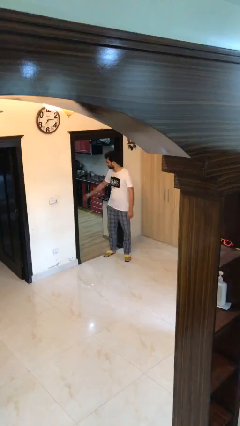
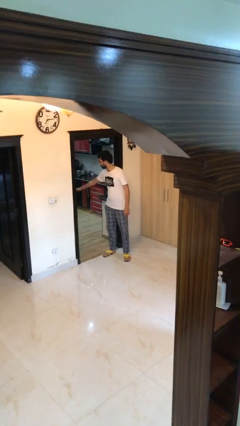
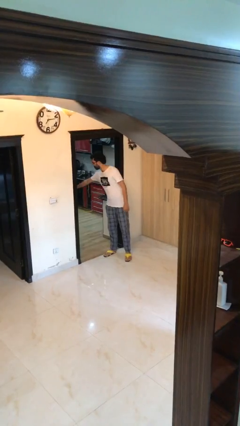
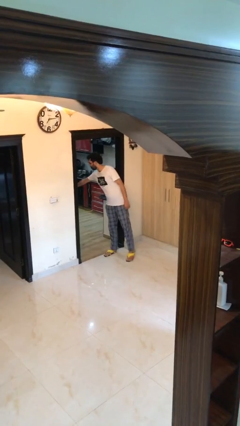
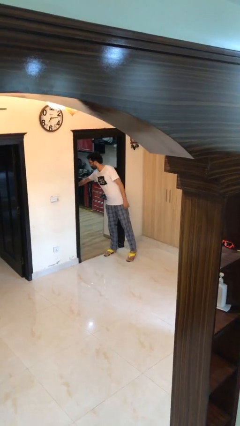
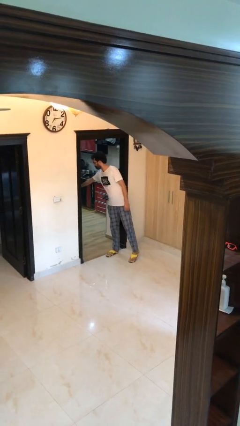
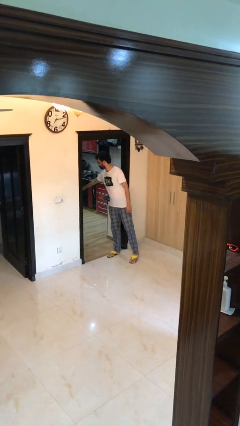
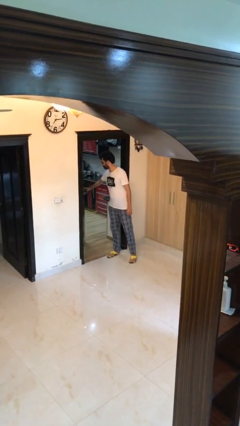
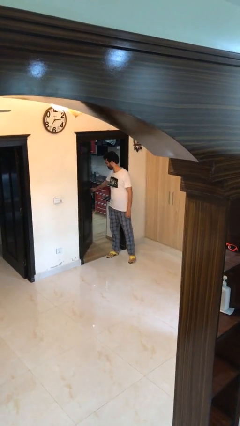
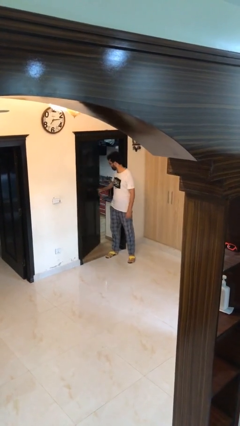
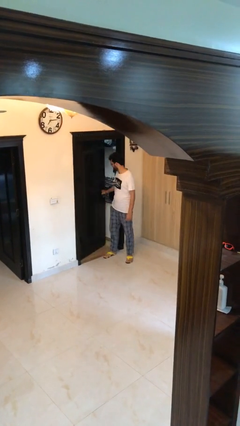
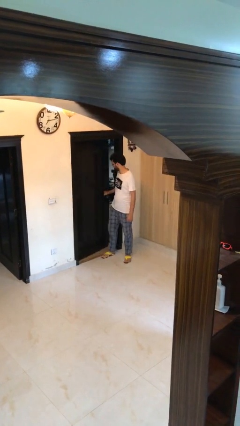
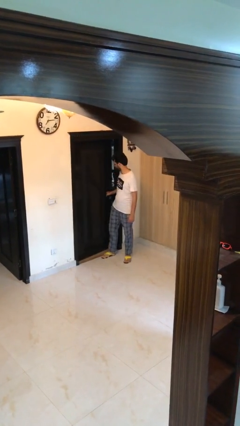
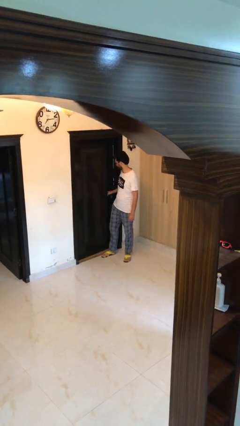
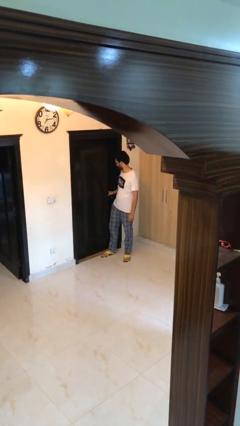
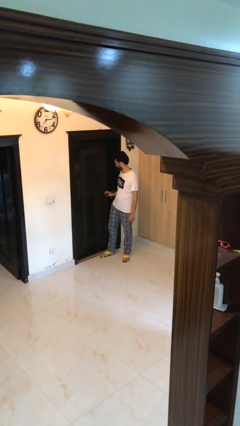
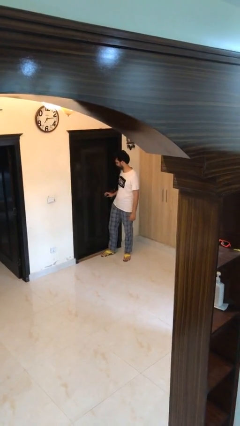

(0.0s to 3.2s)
person closes facility door

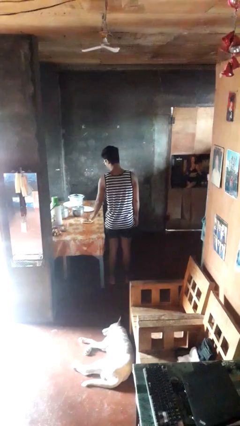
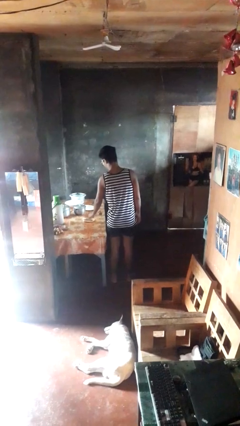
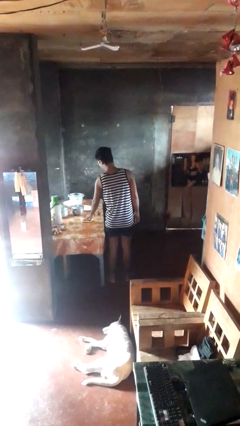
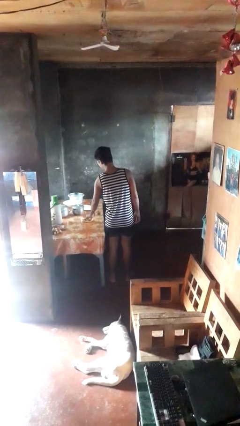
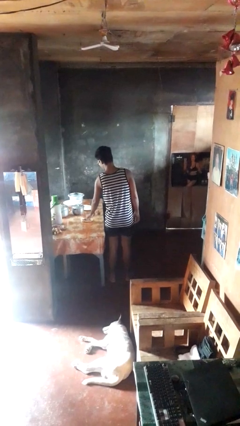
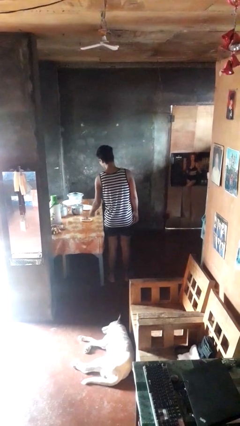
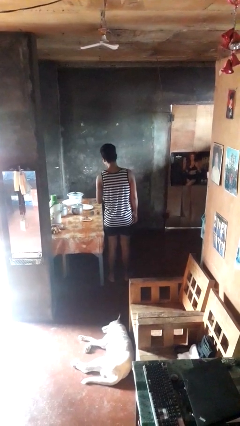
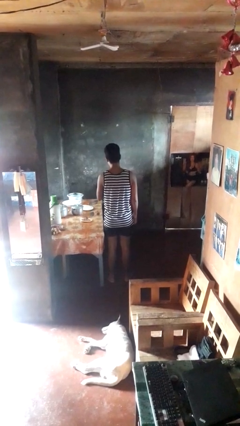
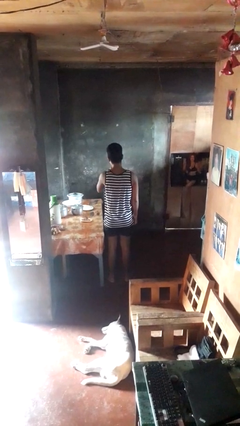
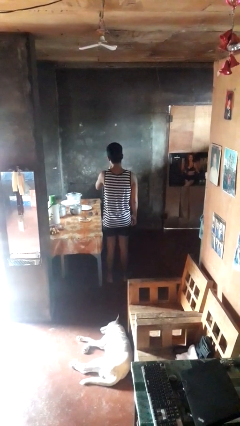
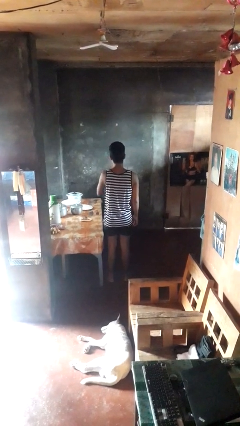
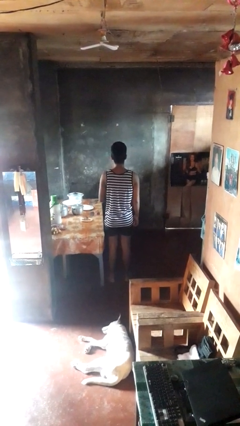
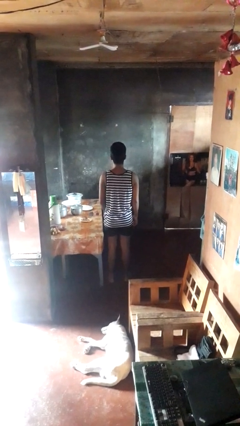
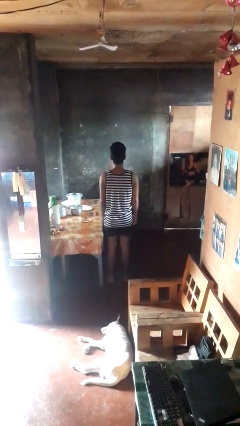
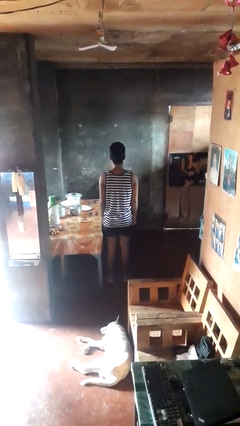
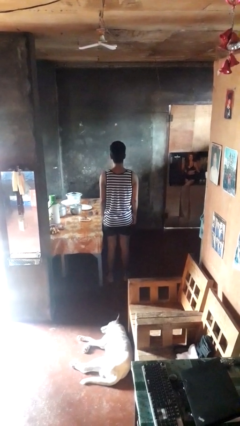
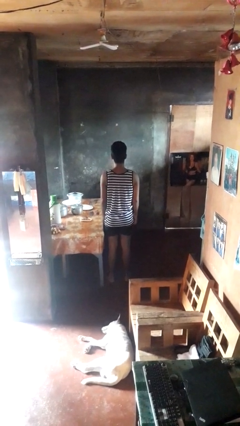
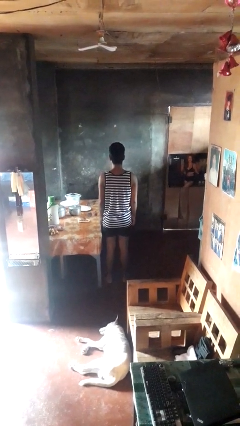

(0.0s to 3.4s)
person eats with hands

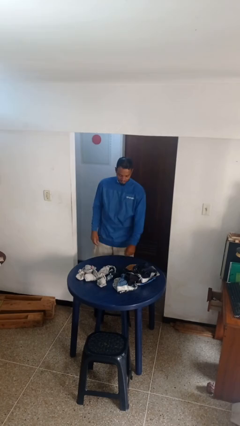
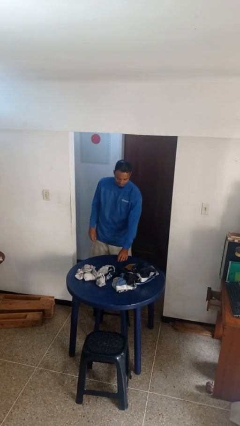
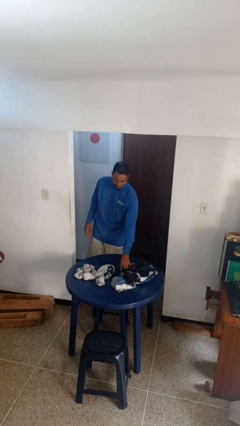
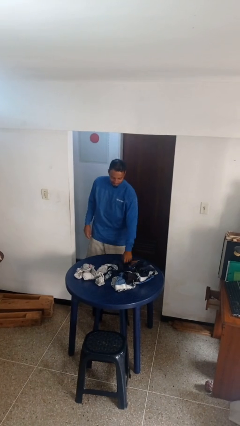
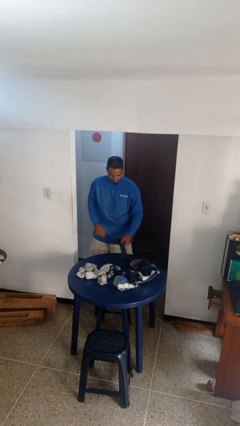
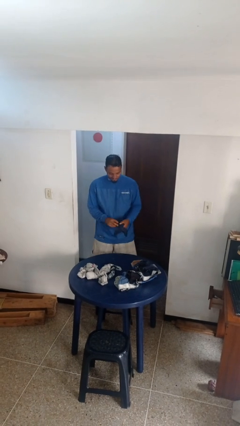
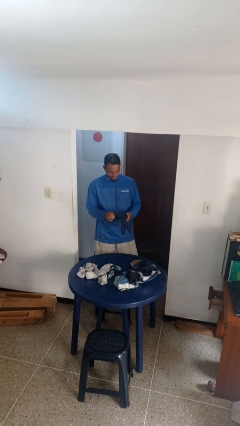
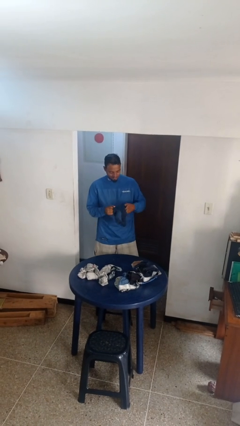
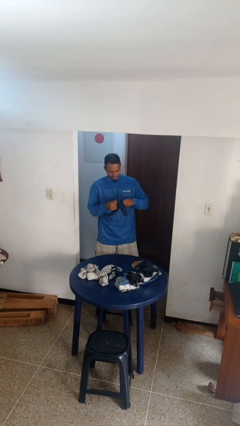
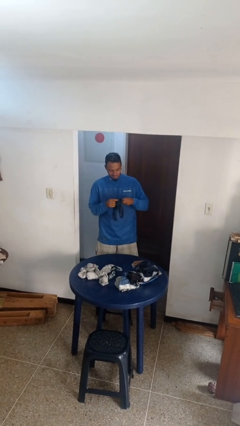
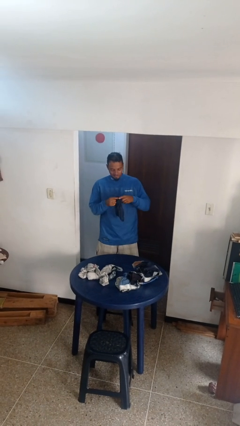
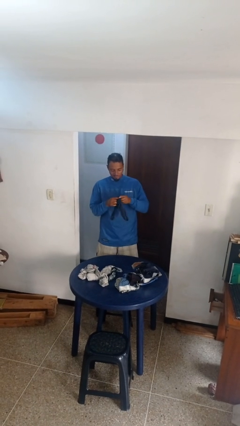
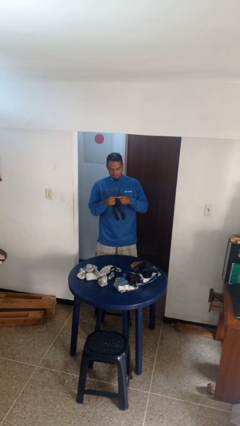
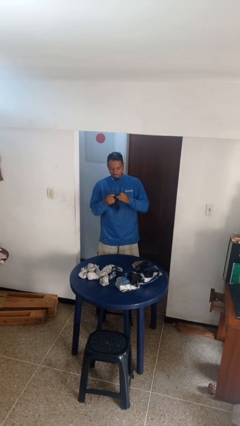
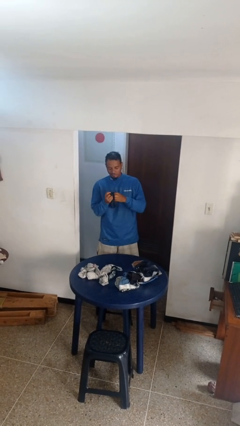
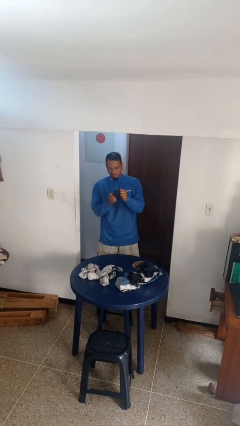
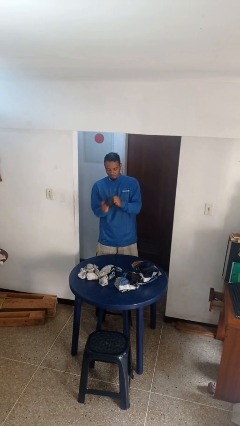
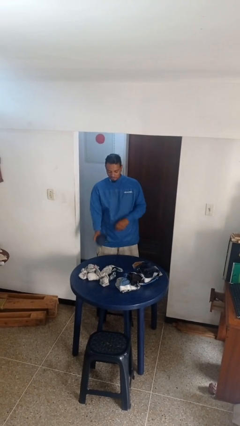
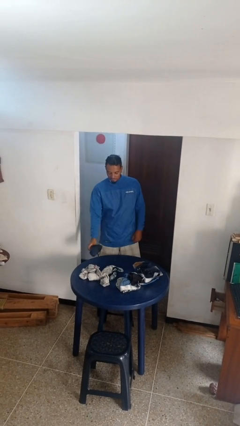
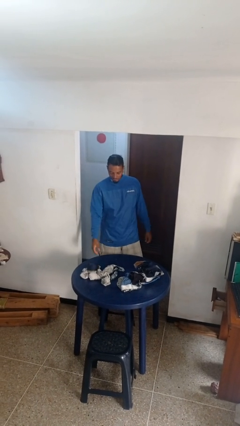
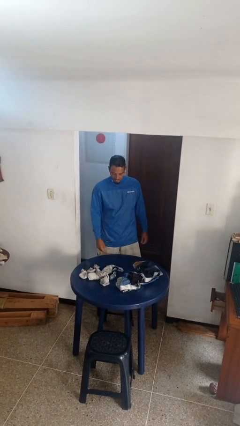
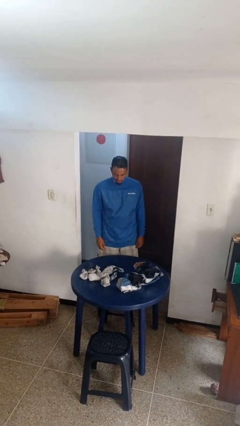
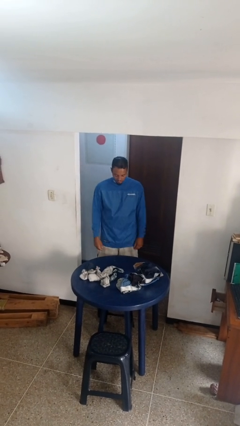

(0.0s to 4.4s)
person folds socks

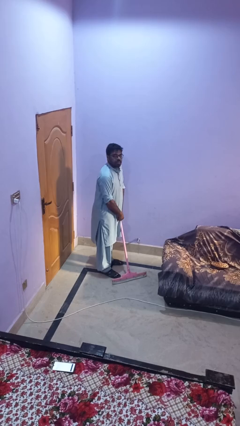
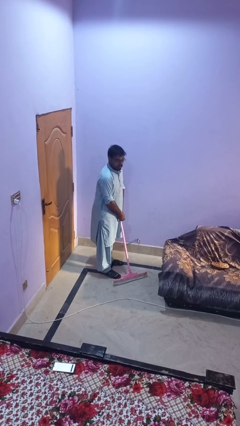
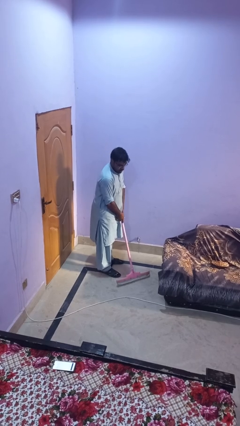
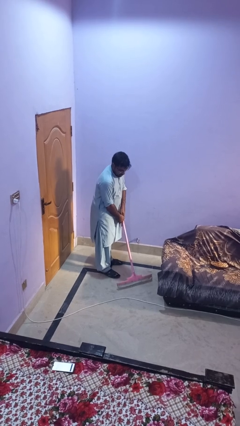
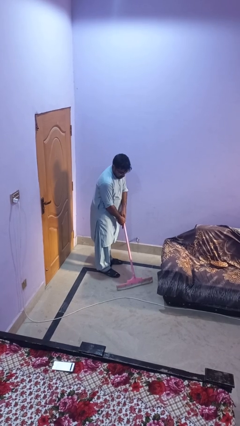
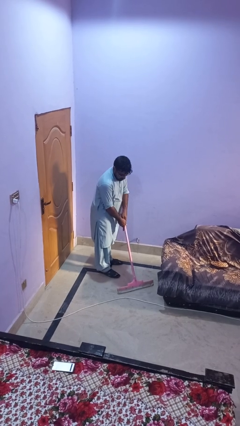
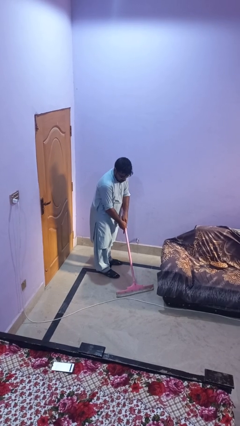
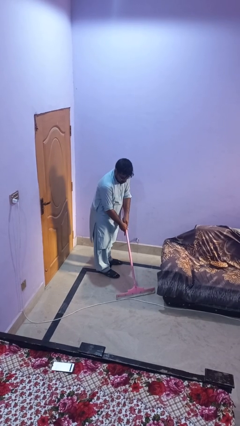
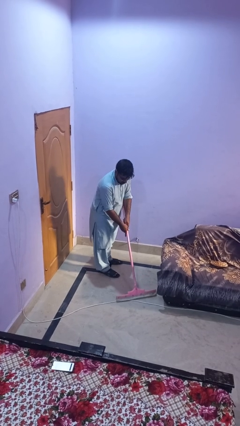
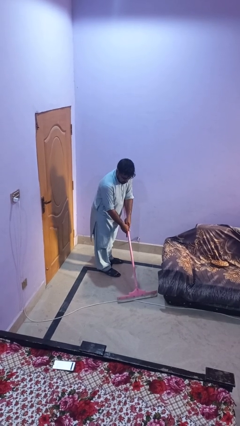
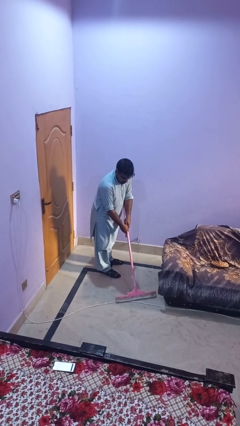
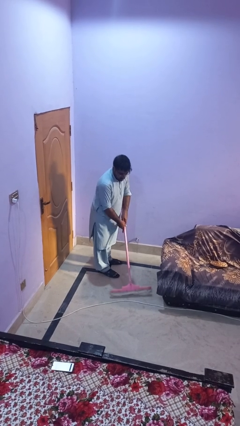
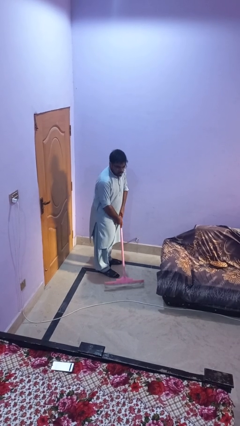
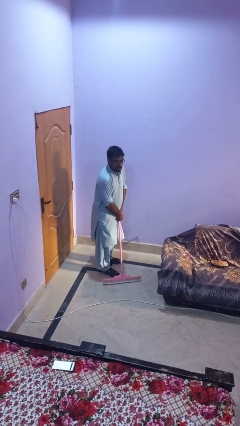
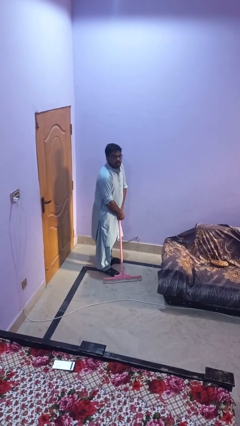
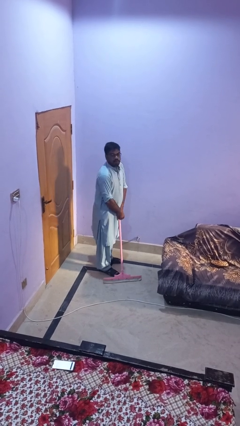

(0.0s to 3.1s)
person vacuums carpet

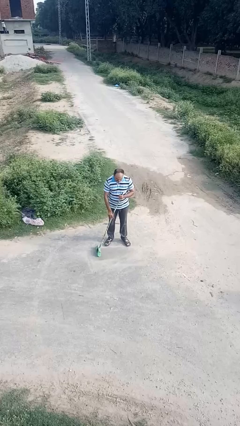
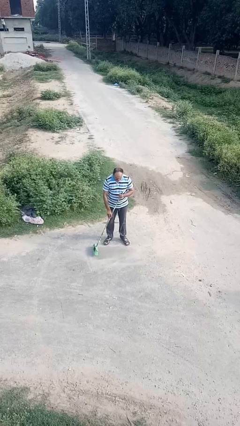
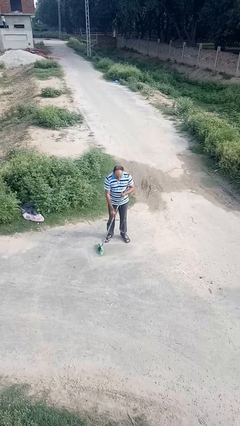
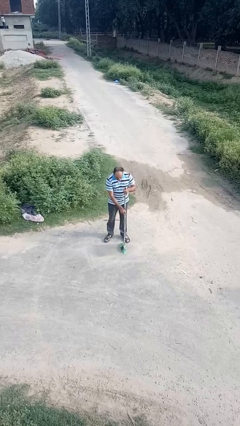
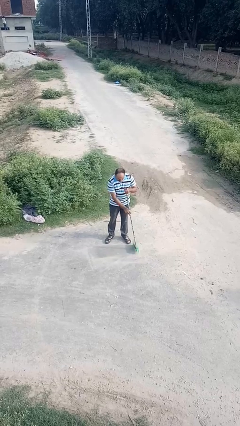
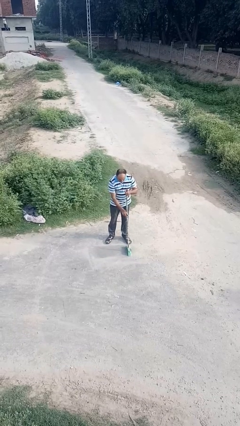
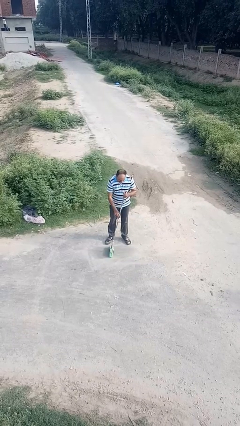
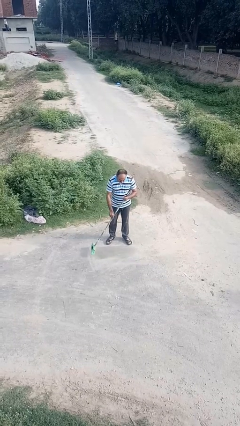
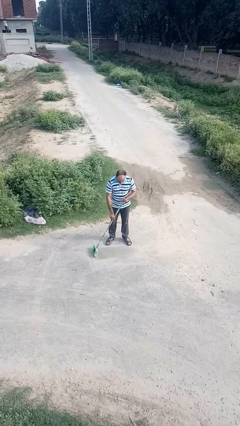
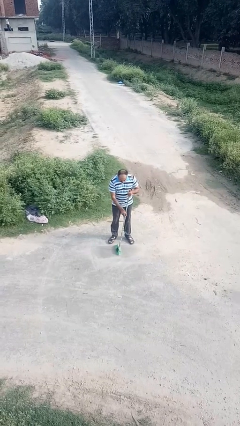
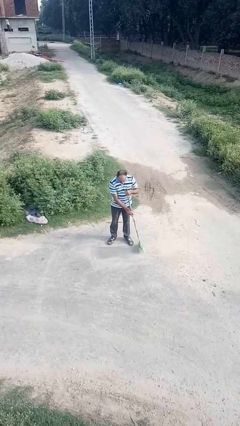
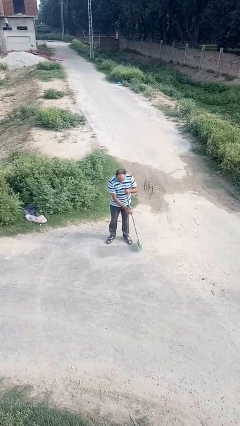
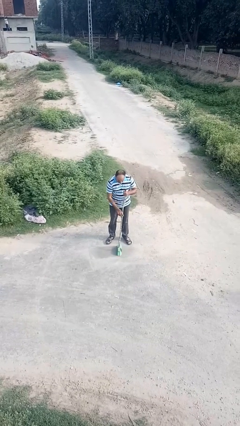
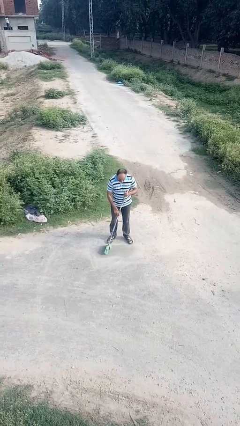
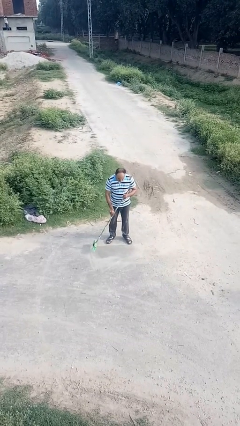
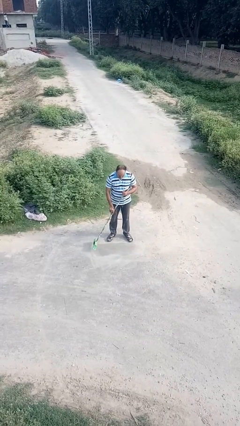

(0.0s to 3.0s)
person sweeps floor

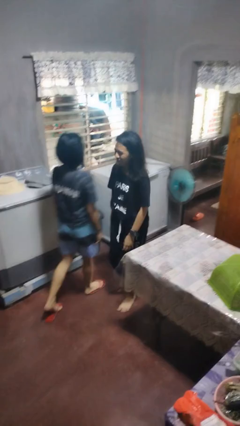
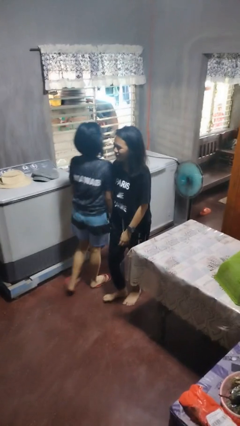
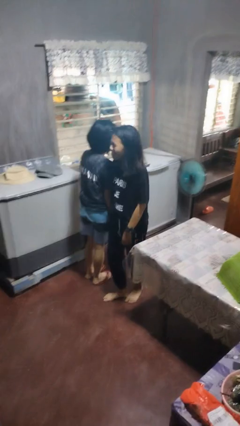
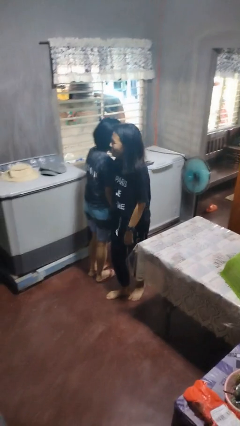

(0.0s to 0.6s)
person bumps into person
